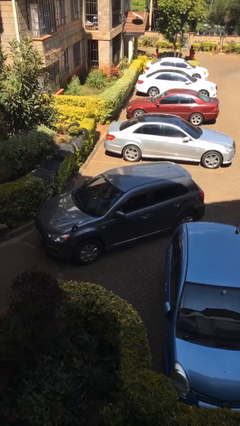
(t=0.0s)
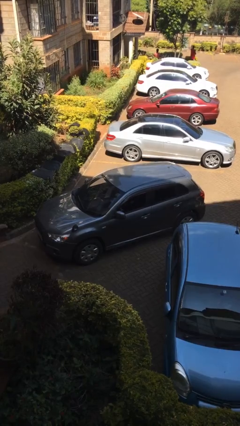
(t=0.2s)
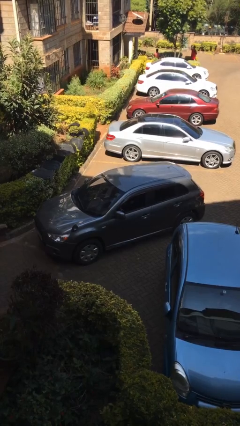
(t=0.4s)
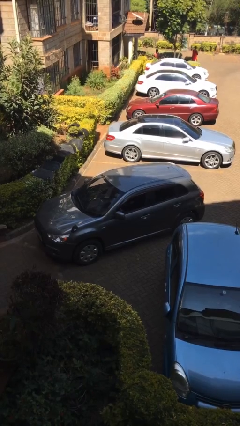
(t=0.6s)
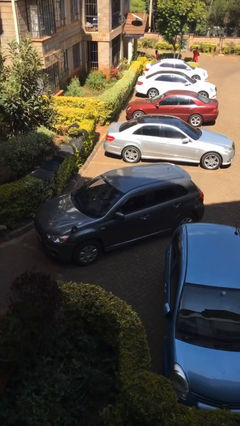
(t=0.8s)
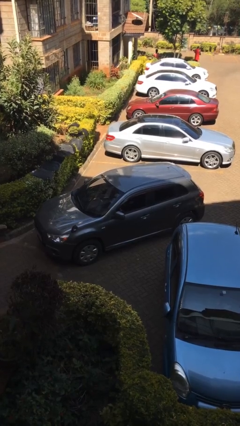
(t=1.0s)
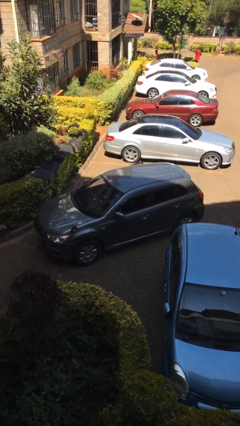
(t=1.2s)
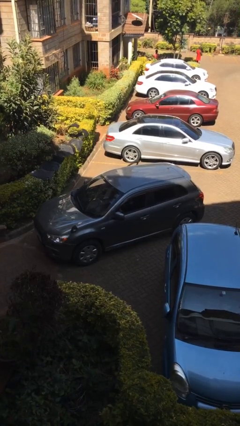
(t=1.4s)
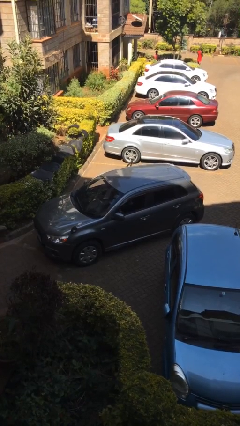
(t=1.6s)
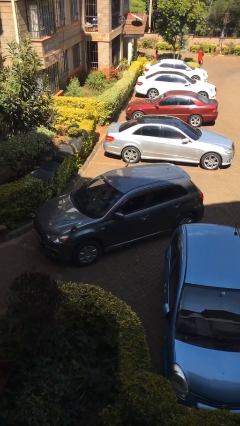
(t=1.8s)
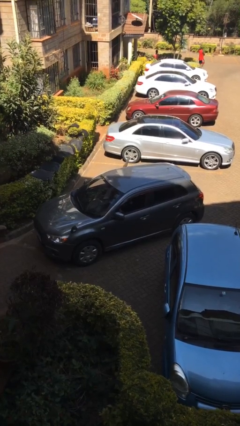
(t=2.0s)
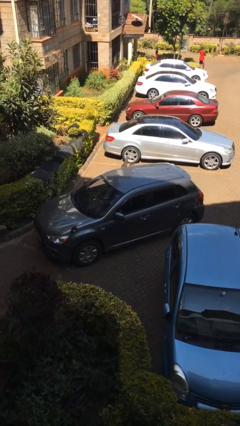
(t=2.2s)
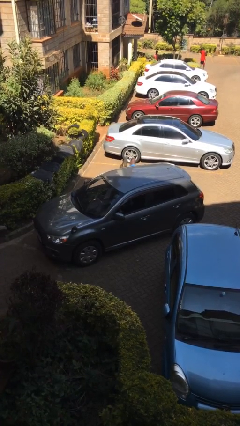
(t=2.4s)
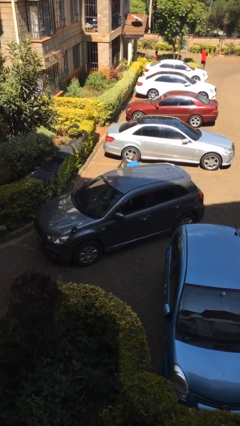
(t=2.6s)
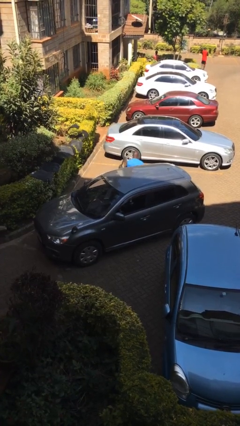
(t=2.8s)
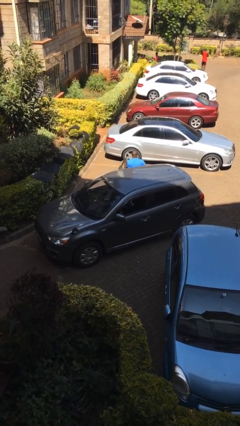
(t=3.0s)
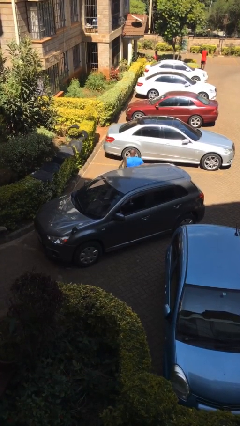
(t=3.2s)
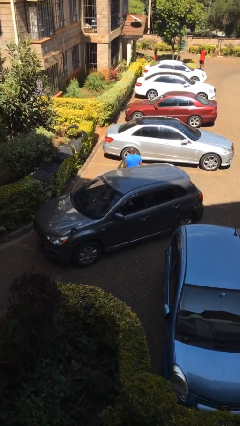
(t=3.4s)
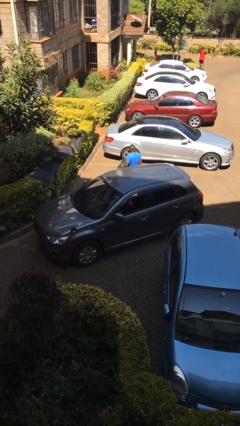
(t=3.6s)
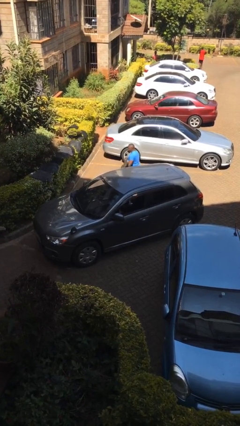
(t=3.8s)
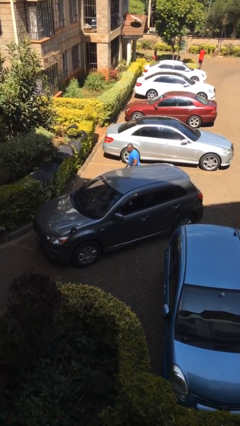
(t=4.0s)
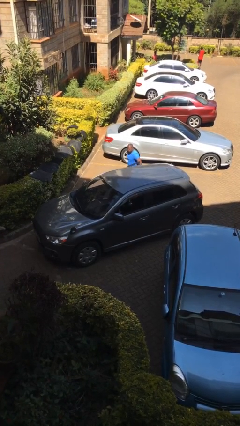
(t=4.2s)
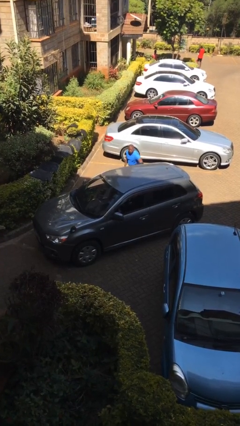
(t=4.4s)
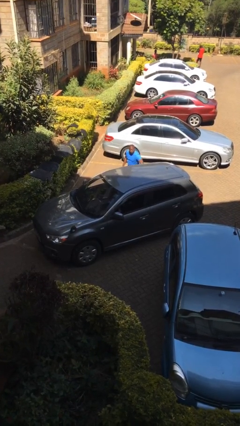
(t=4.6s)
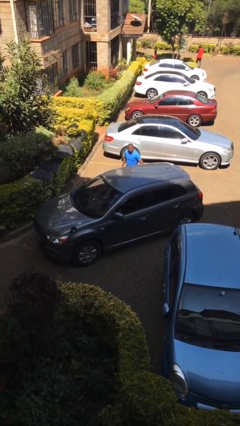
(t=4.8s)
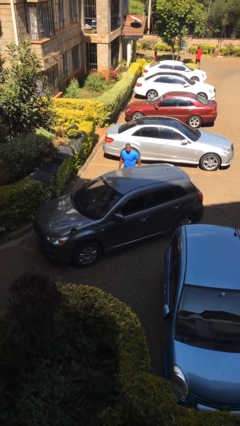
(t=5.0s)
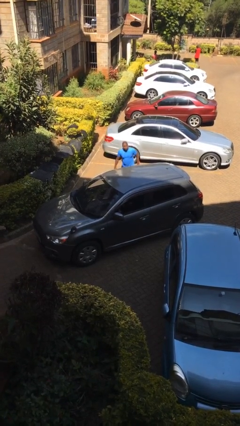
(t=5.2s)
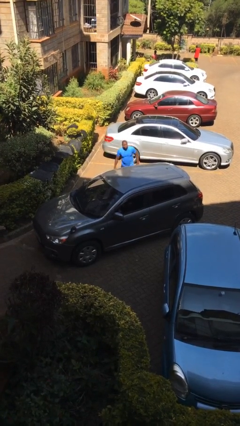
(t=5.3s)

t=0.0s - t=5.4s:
car drops off person

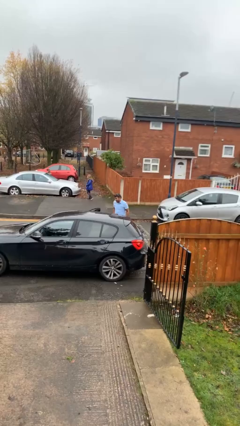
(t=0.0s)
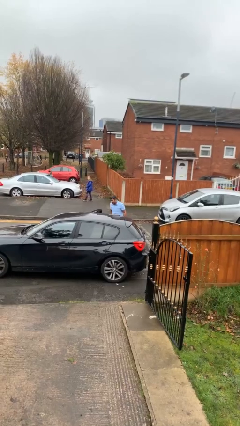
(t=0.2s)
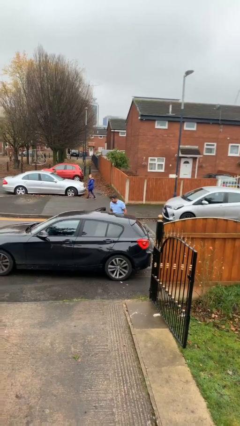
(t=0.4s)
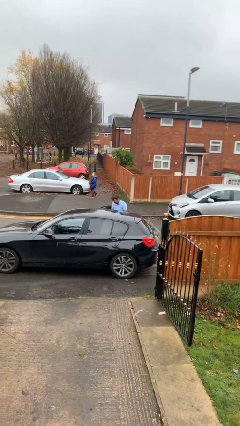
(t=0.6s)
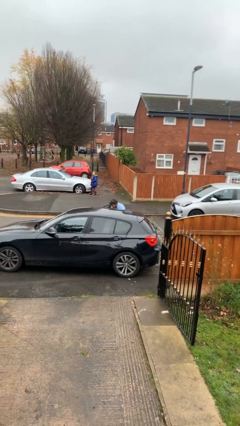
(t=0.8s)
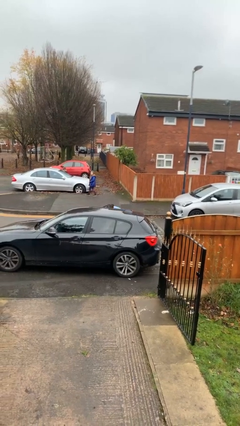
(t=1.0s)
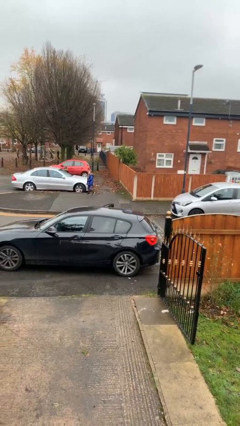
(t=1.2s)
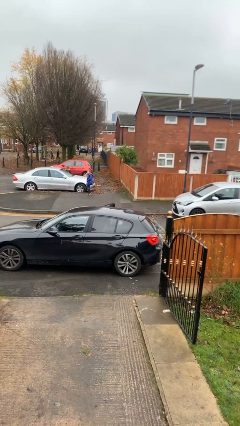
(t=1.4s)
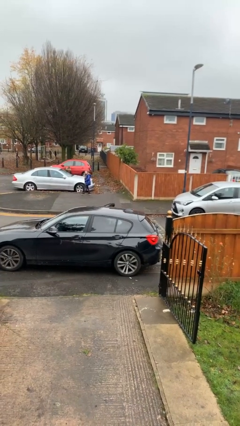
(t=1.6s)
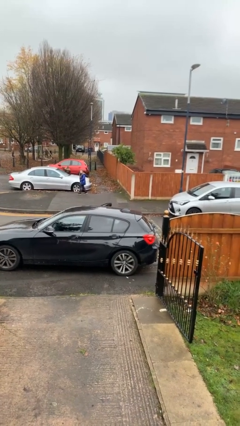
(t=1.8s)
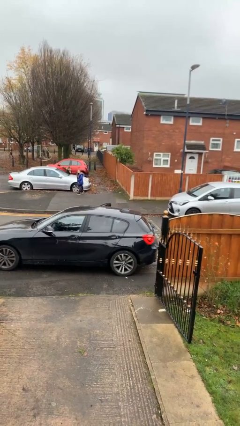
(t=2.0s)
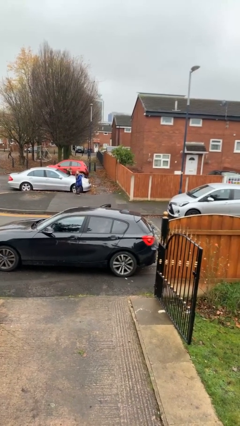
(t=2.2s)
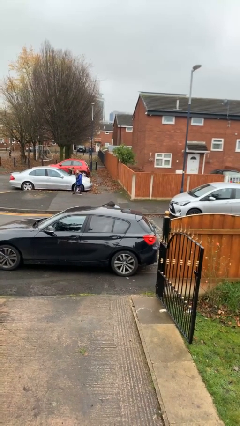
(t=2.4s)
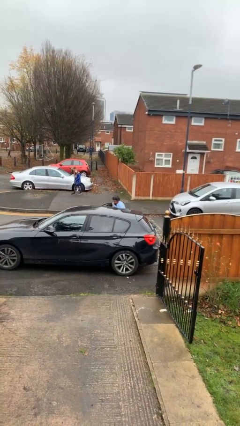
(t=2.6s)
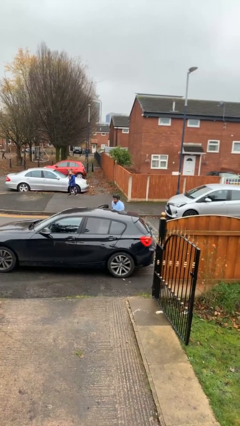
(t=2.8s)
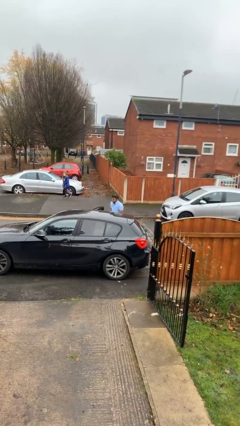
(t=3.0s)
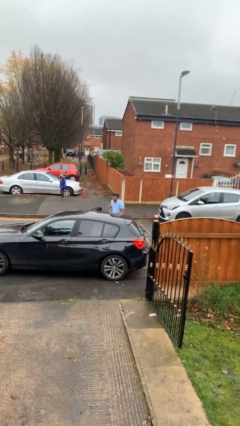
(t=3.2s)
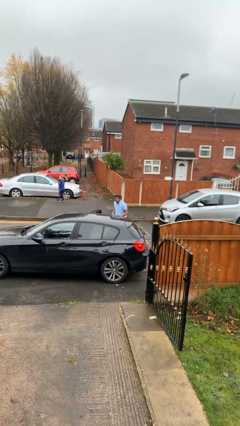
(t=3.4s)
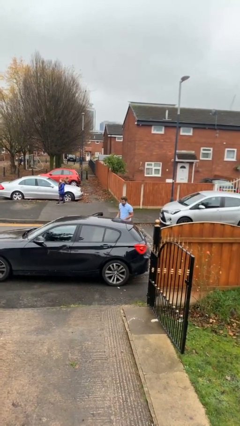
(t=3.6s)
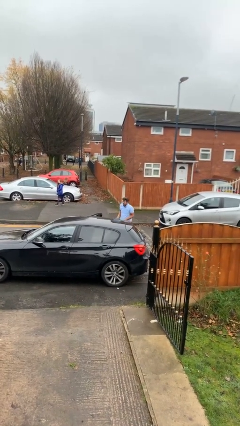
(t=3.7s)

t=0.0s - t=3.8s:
person unloads car

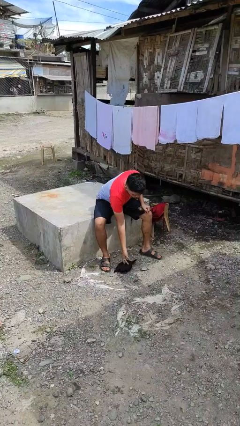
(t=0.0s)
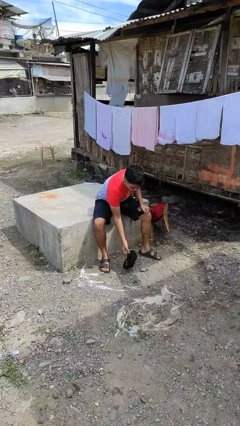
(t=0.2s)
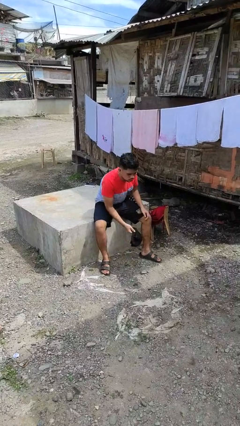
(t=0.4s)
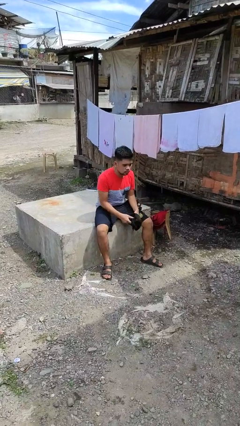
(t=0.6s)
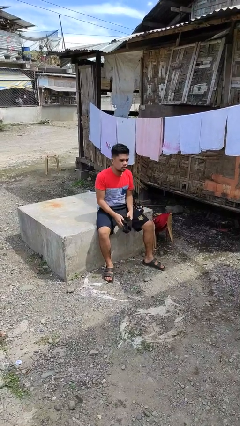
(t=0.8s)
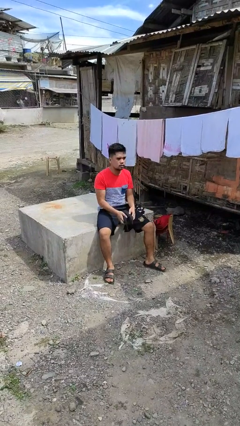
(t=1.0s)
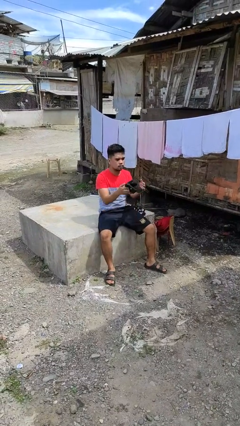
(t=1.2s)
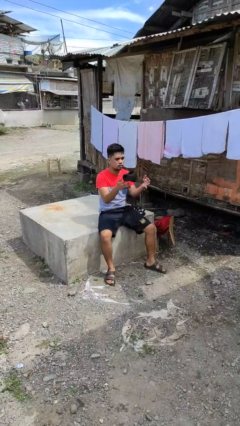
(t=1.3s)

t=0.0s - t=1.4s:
person picks up object from floor

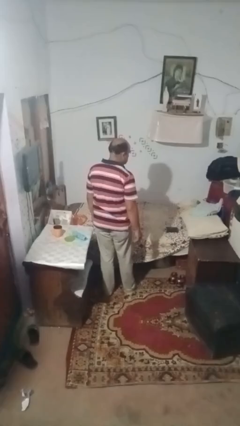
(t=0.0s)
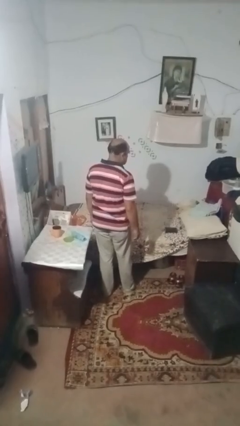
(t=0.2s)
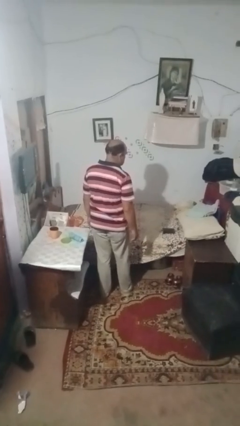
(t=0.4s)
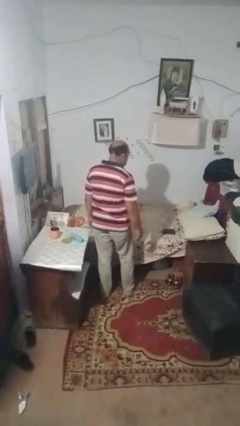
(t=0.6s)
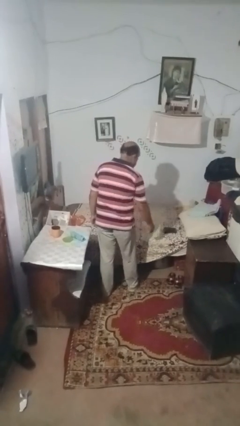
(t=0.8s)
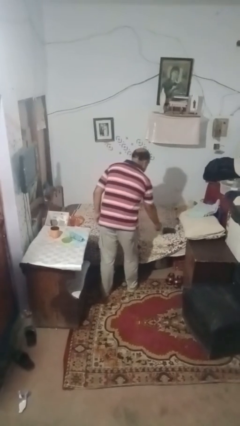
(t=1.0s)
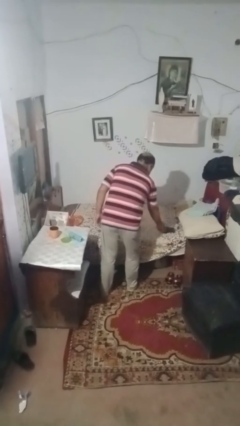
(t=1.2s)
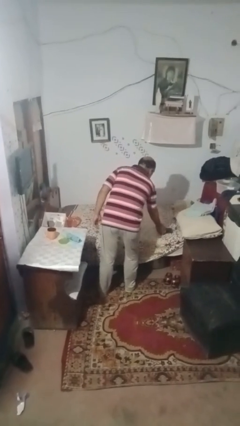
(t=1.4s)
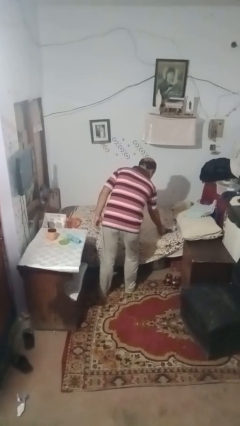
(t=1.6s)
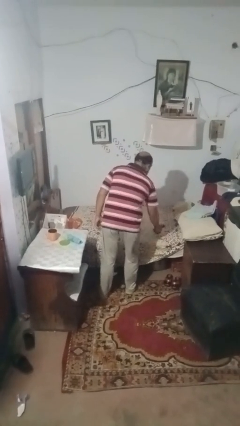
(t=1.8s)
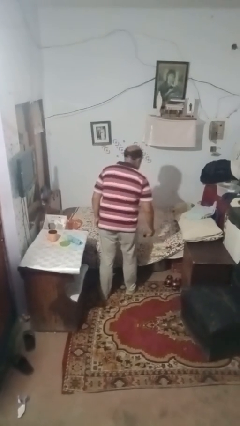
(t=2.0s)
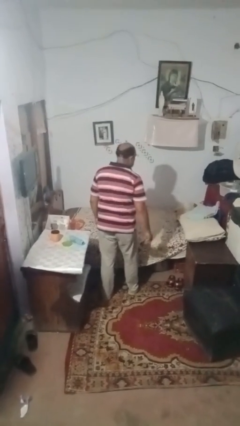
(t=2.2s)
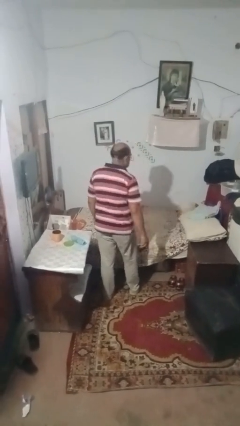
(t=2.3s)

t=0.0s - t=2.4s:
person picks up object from bed

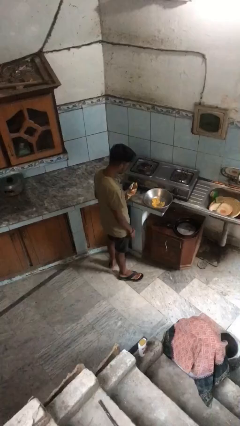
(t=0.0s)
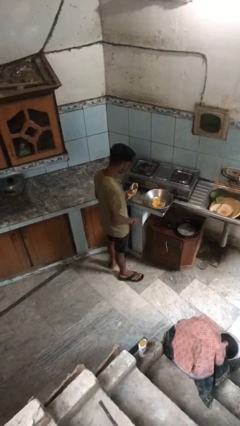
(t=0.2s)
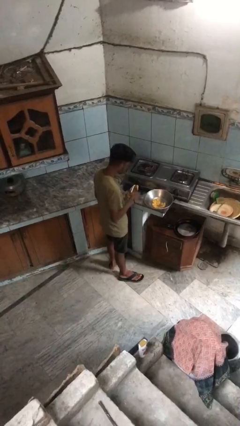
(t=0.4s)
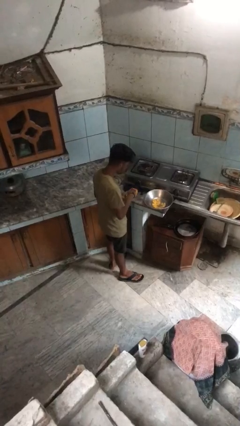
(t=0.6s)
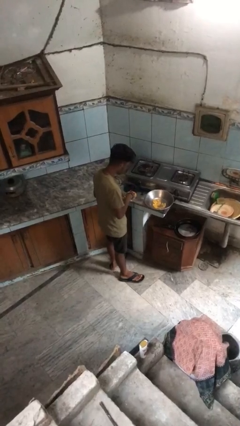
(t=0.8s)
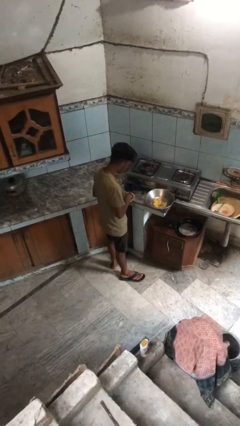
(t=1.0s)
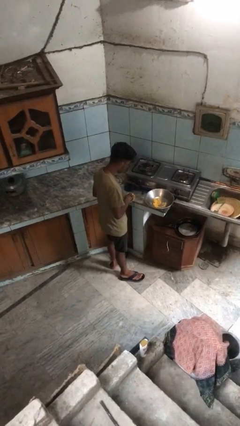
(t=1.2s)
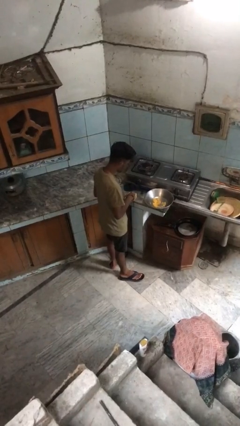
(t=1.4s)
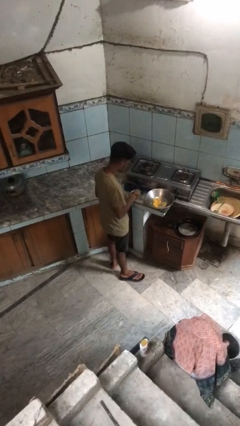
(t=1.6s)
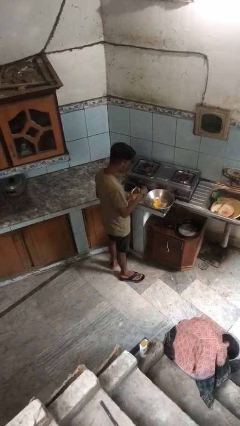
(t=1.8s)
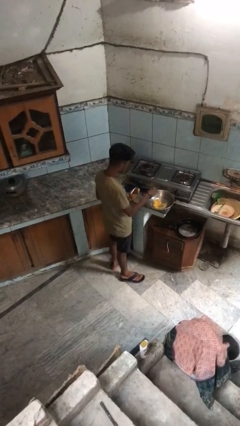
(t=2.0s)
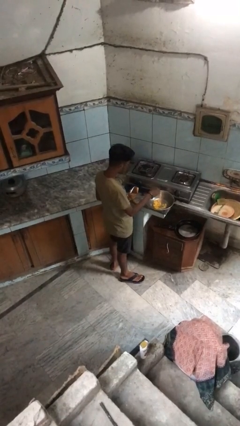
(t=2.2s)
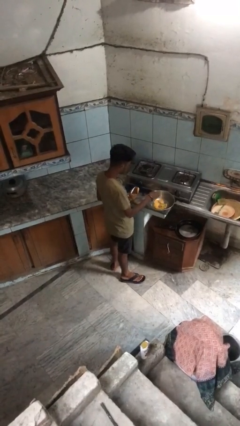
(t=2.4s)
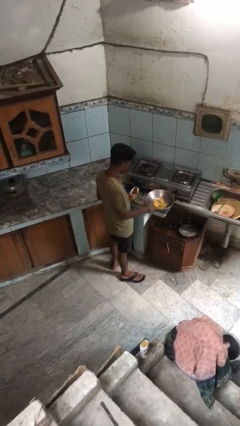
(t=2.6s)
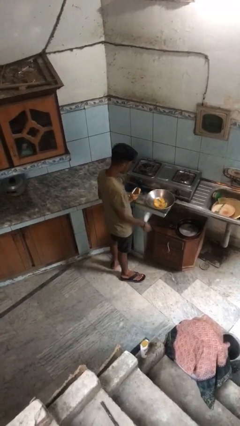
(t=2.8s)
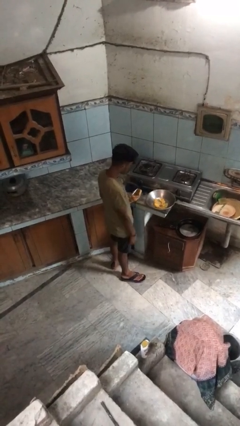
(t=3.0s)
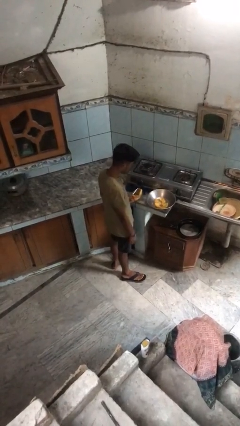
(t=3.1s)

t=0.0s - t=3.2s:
person pours into bowl

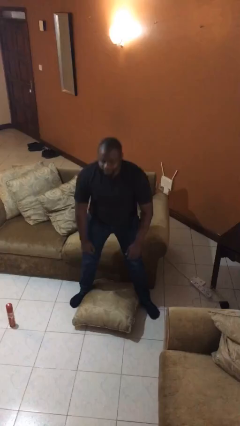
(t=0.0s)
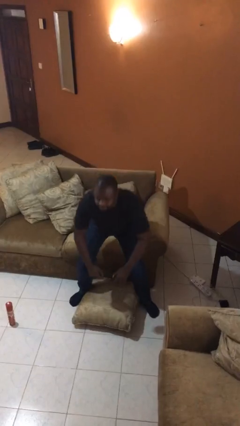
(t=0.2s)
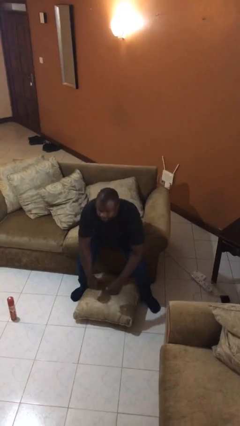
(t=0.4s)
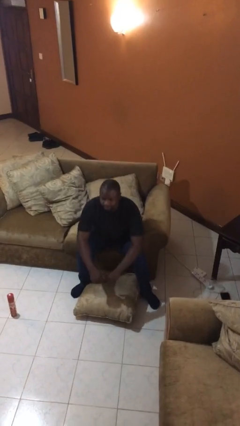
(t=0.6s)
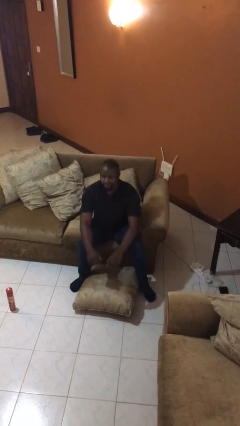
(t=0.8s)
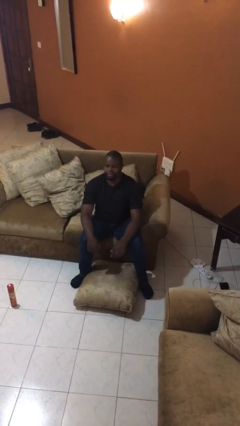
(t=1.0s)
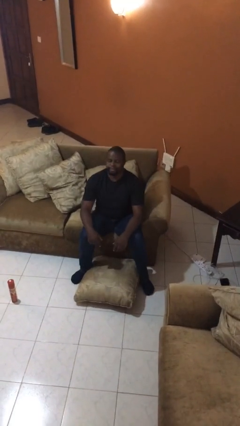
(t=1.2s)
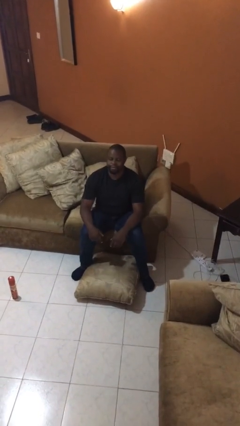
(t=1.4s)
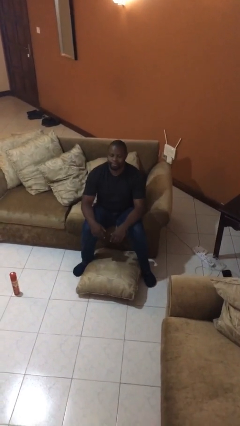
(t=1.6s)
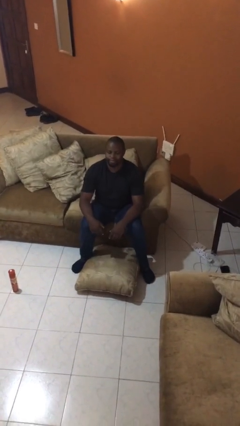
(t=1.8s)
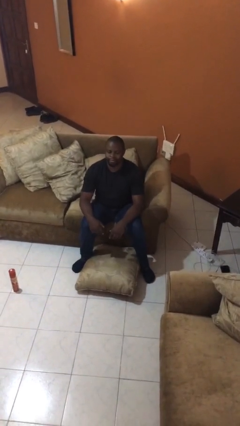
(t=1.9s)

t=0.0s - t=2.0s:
person sits down
